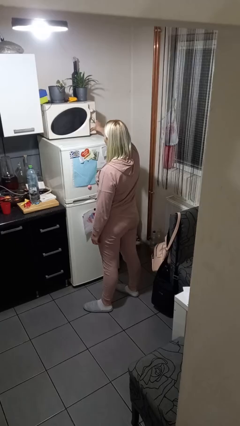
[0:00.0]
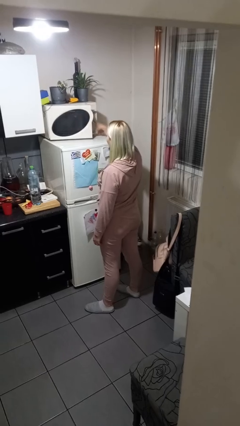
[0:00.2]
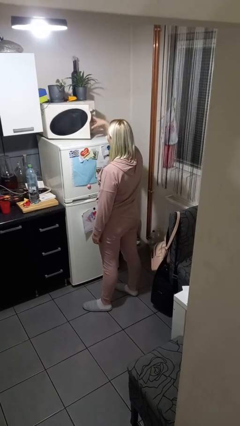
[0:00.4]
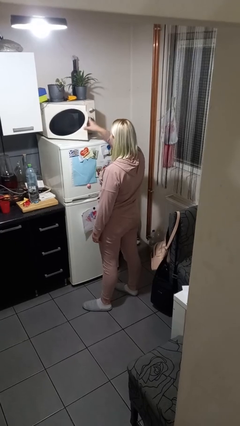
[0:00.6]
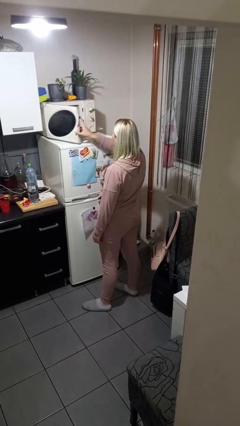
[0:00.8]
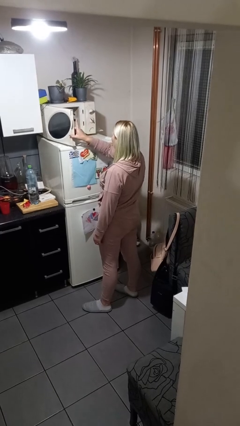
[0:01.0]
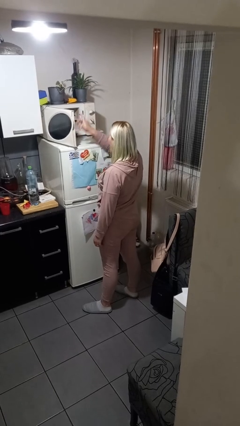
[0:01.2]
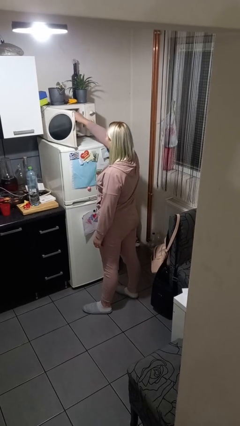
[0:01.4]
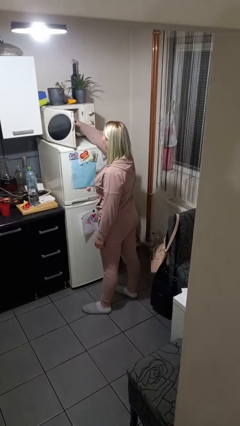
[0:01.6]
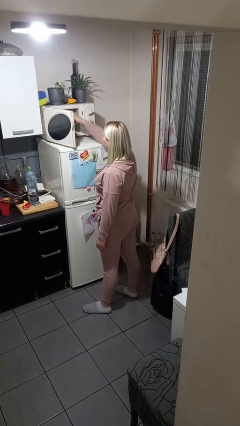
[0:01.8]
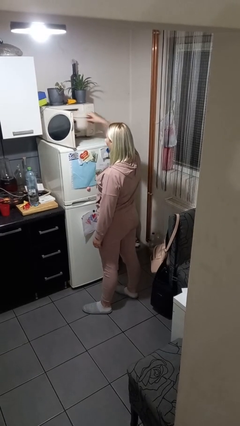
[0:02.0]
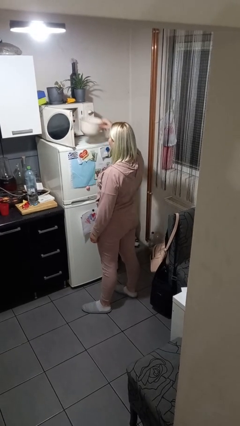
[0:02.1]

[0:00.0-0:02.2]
person takes object from microwave

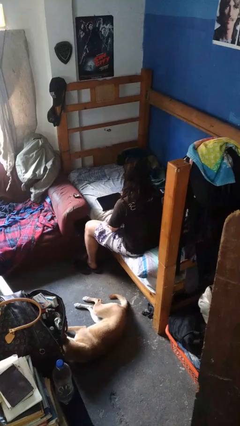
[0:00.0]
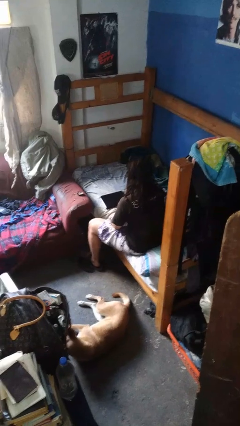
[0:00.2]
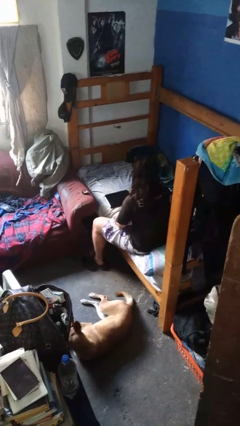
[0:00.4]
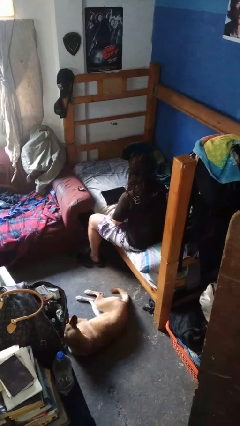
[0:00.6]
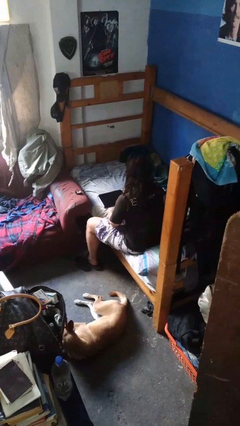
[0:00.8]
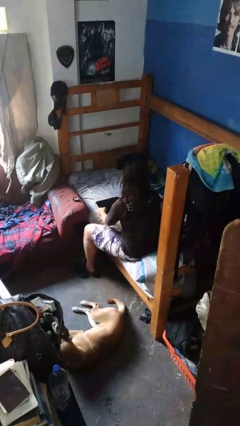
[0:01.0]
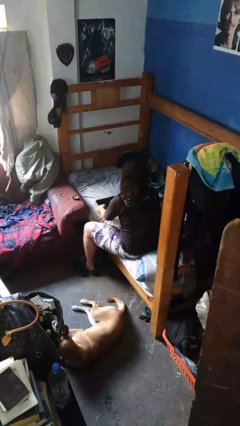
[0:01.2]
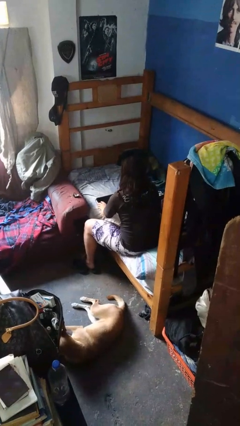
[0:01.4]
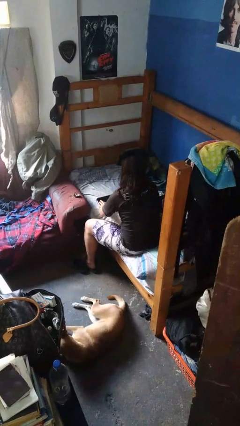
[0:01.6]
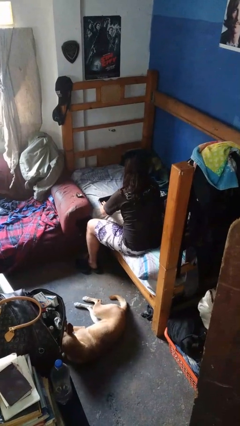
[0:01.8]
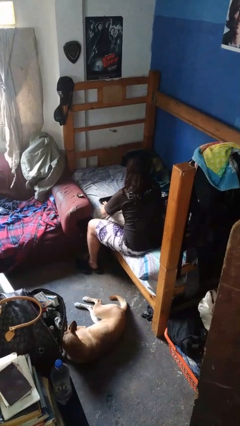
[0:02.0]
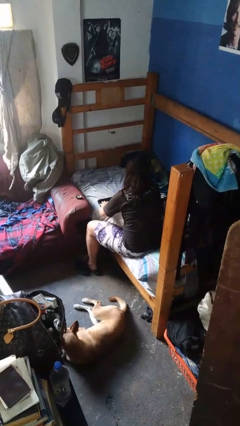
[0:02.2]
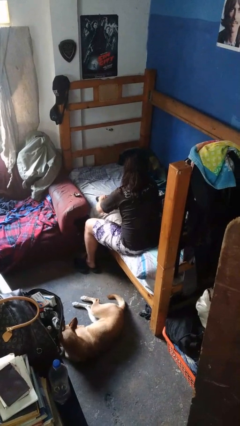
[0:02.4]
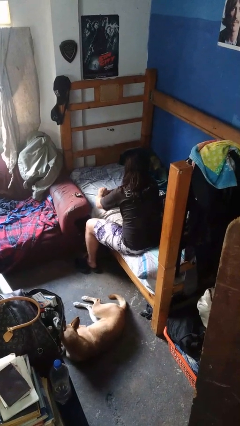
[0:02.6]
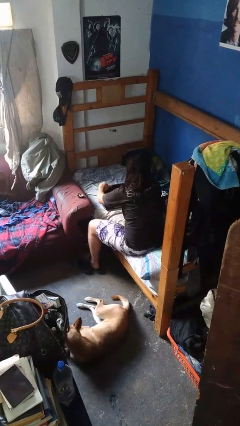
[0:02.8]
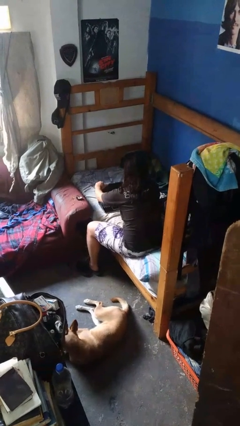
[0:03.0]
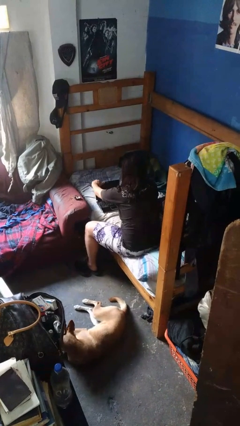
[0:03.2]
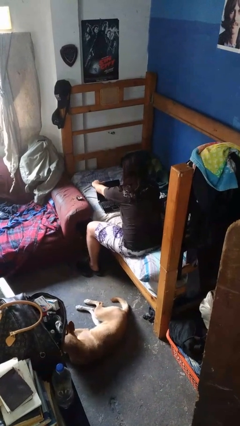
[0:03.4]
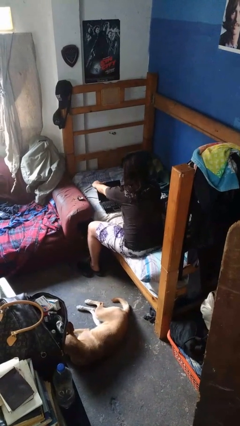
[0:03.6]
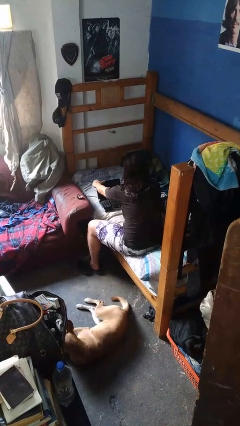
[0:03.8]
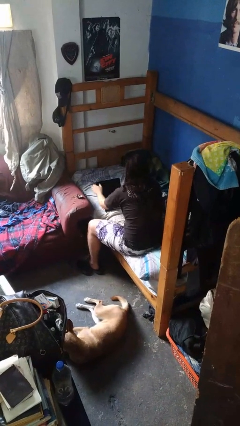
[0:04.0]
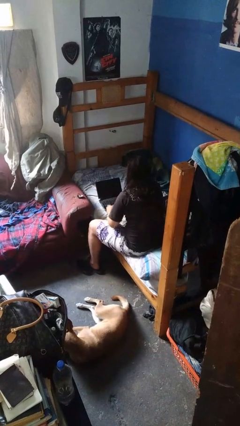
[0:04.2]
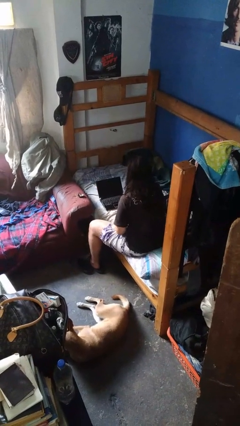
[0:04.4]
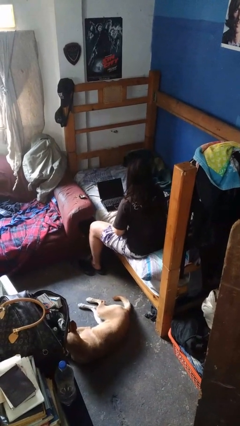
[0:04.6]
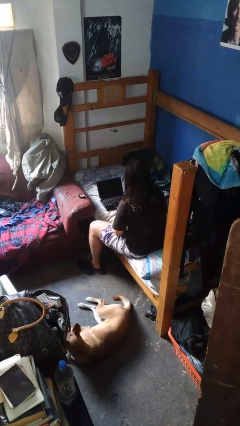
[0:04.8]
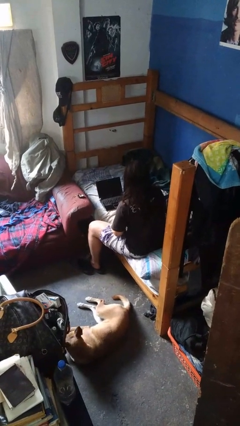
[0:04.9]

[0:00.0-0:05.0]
person opens laptop

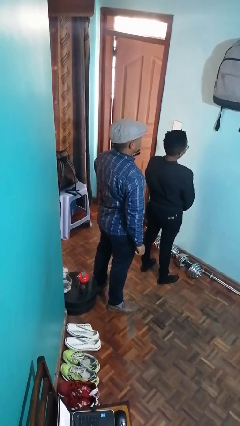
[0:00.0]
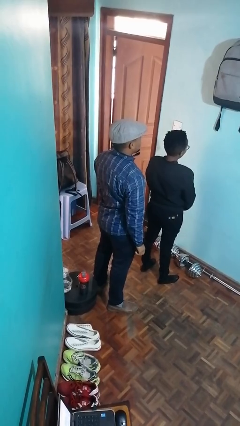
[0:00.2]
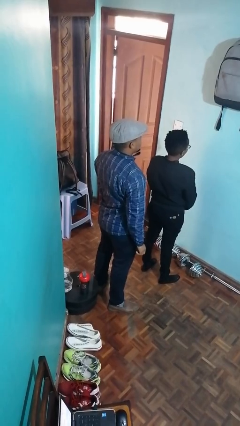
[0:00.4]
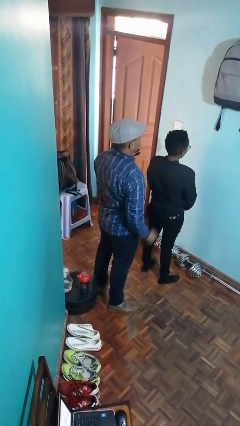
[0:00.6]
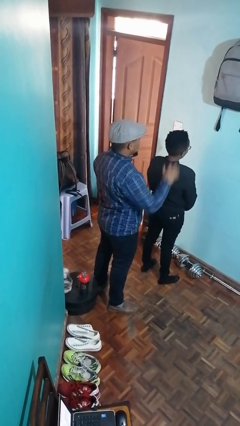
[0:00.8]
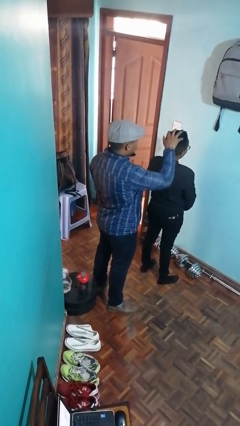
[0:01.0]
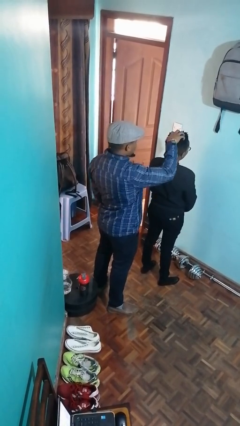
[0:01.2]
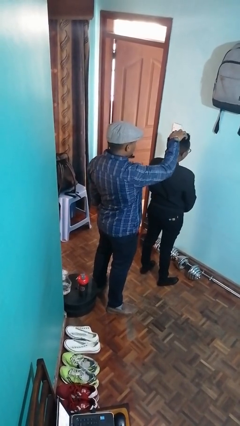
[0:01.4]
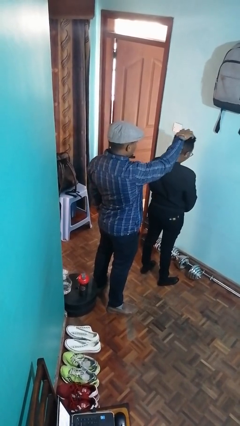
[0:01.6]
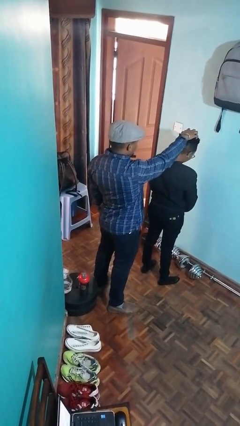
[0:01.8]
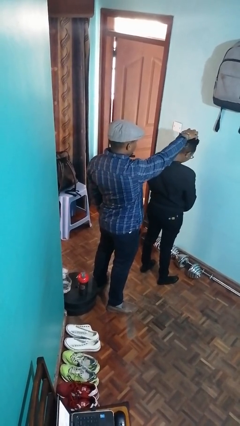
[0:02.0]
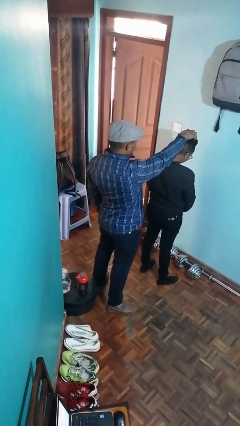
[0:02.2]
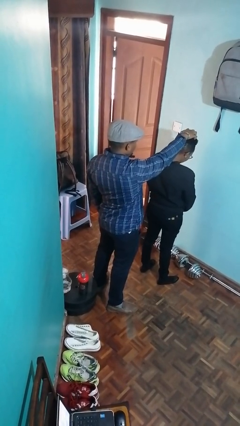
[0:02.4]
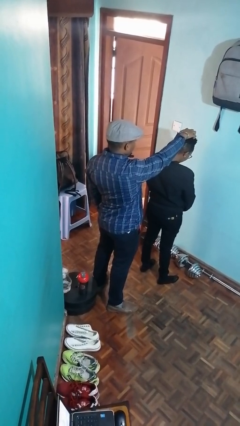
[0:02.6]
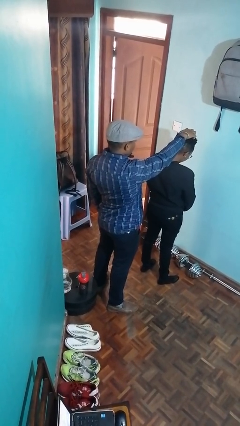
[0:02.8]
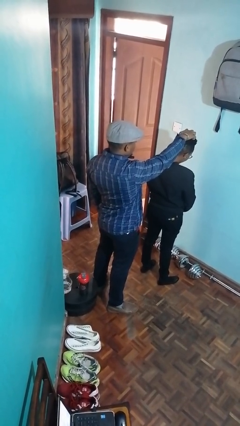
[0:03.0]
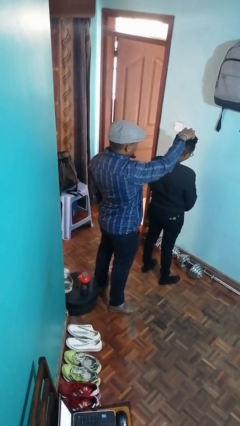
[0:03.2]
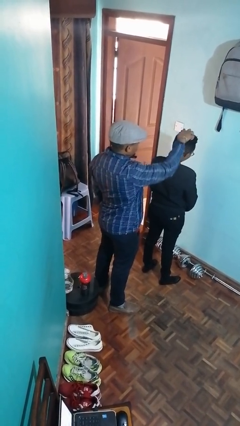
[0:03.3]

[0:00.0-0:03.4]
person grabs person by hair

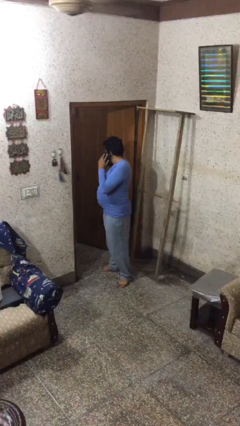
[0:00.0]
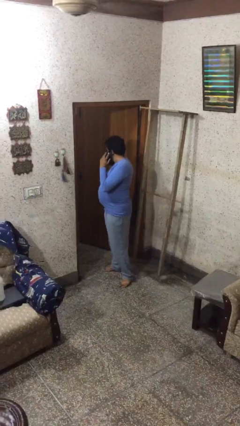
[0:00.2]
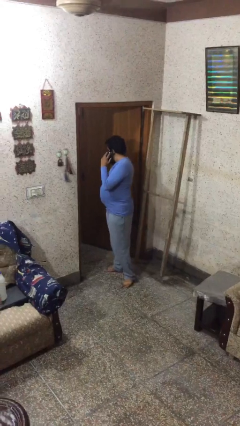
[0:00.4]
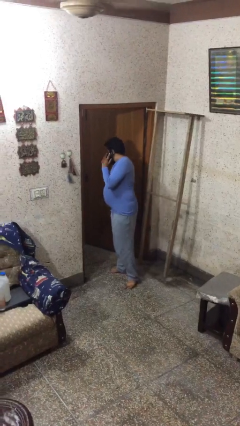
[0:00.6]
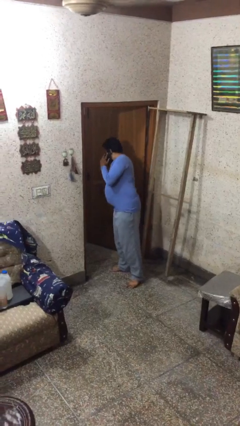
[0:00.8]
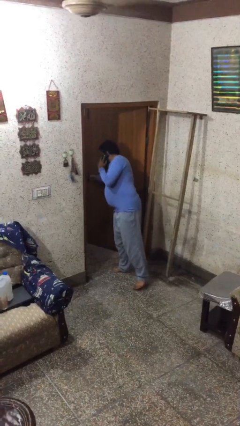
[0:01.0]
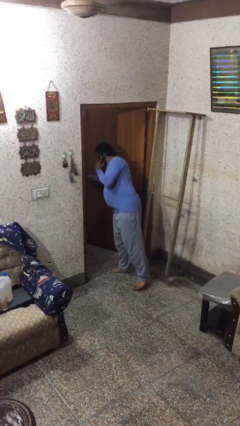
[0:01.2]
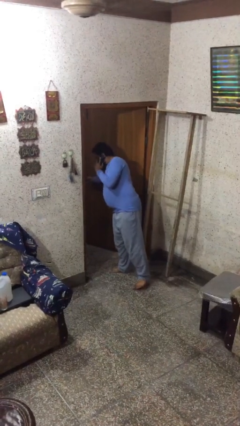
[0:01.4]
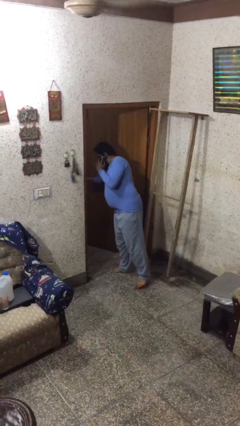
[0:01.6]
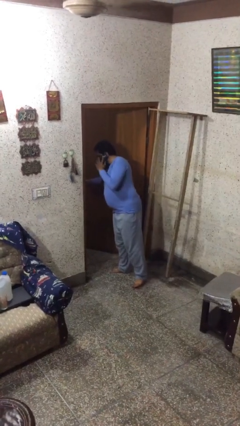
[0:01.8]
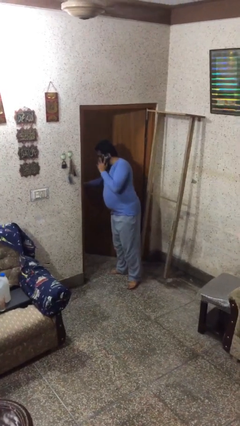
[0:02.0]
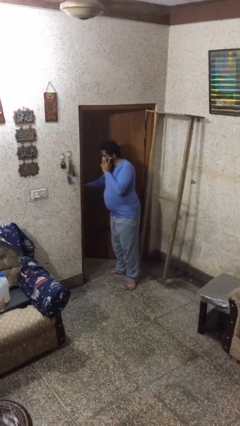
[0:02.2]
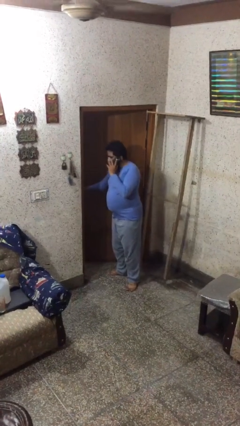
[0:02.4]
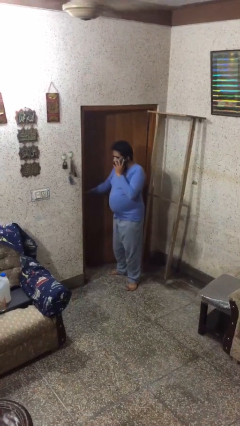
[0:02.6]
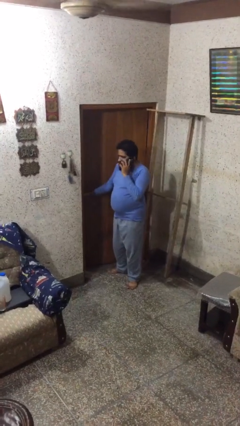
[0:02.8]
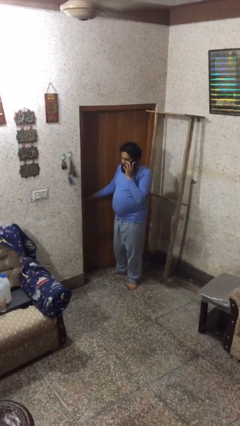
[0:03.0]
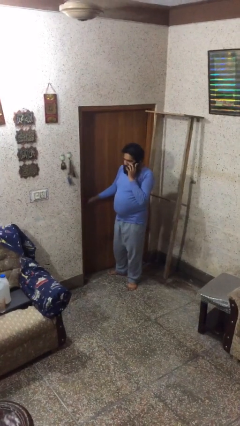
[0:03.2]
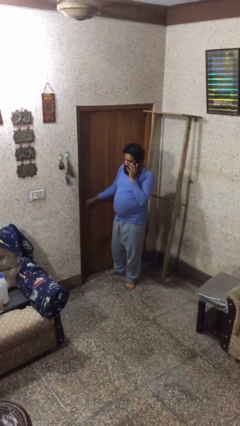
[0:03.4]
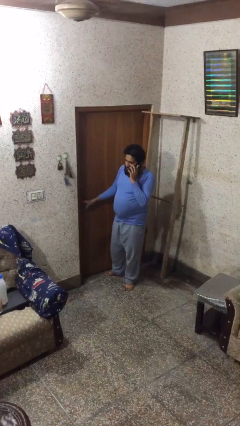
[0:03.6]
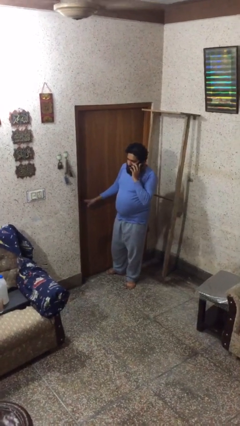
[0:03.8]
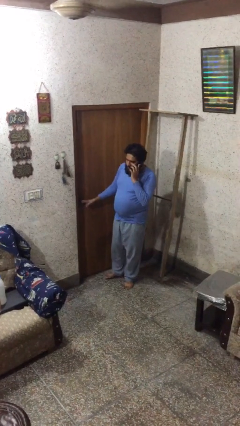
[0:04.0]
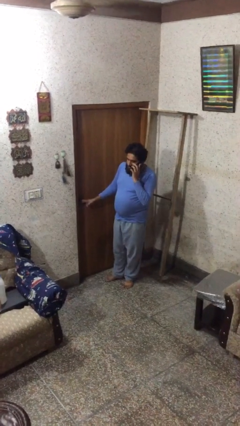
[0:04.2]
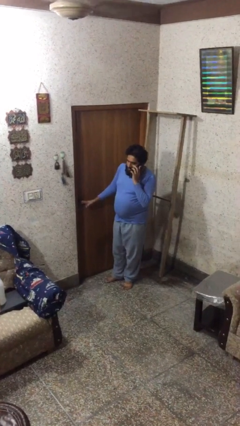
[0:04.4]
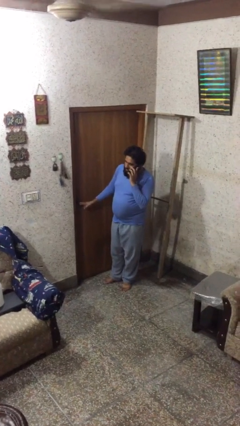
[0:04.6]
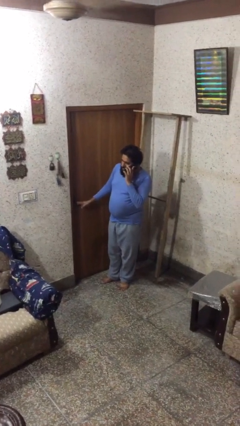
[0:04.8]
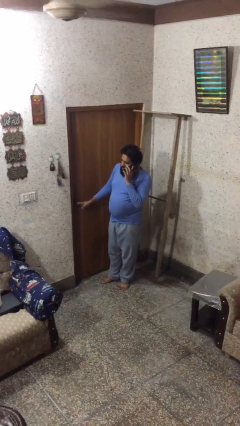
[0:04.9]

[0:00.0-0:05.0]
person closes facility door

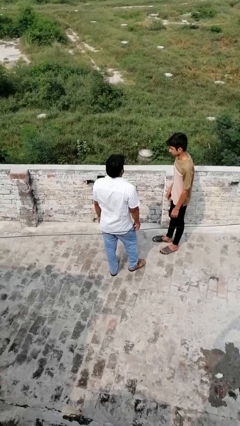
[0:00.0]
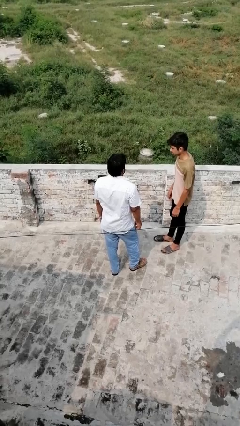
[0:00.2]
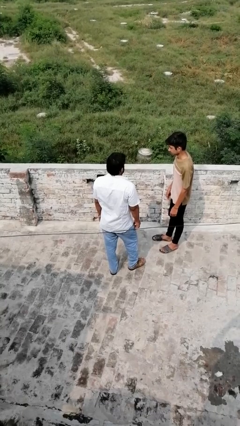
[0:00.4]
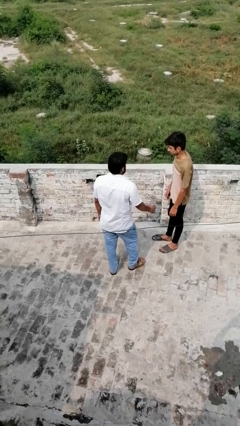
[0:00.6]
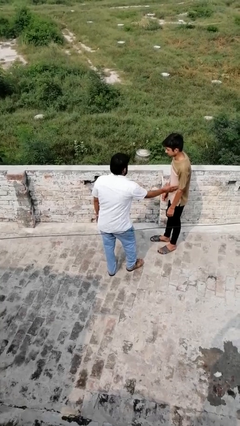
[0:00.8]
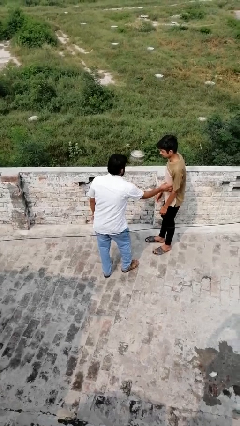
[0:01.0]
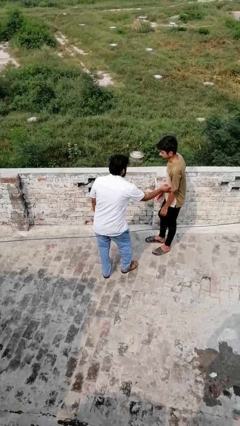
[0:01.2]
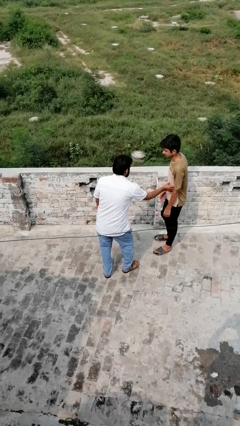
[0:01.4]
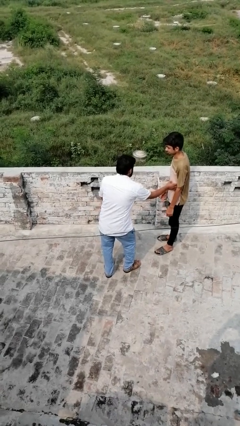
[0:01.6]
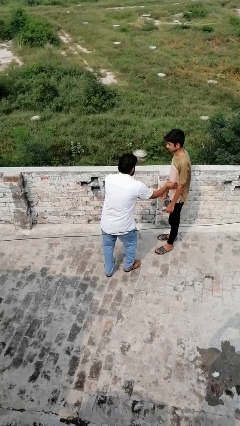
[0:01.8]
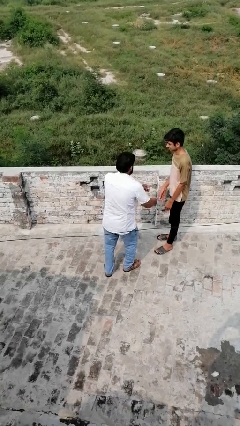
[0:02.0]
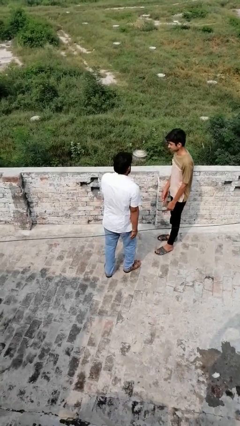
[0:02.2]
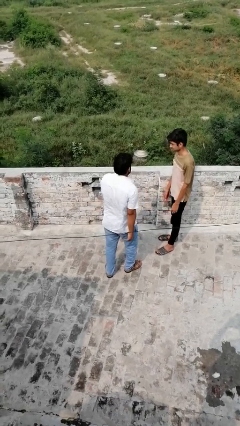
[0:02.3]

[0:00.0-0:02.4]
person tickles person
